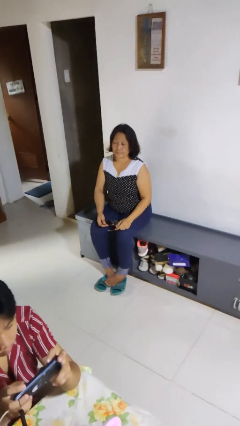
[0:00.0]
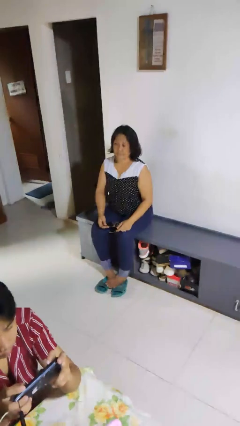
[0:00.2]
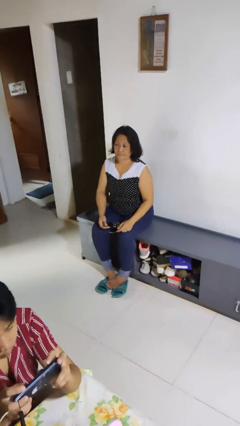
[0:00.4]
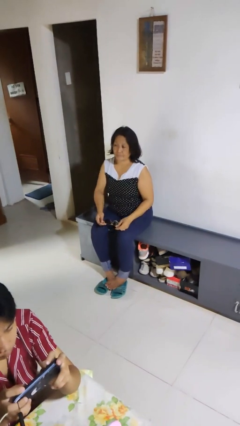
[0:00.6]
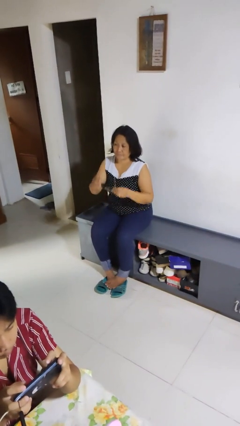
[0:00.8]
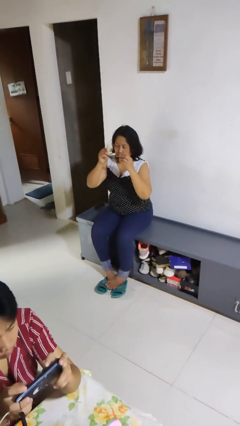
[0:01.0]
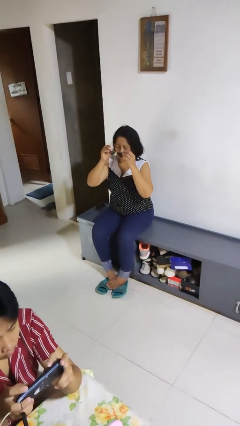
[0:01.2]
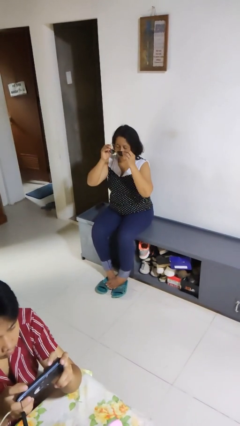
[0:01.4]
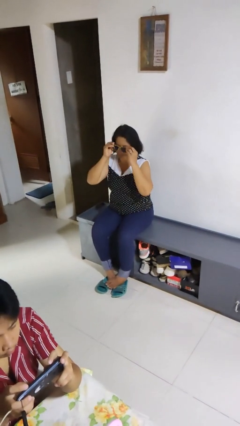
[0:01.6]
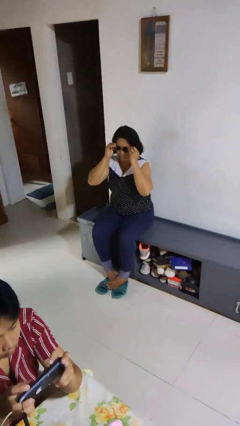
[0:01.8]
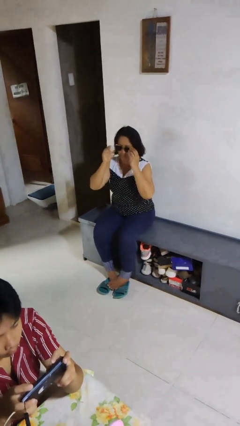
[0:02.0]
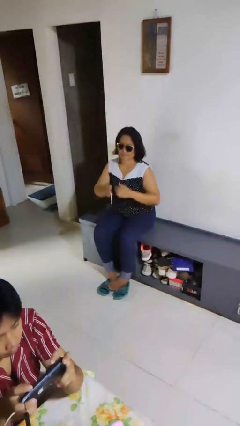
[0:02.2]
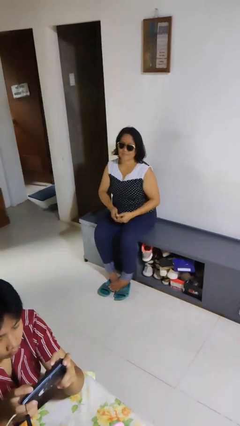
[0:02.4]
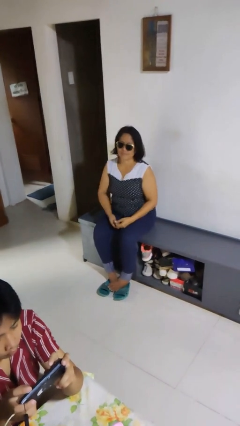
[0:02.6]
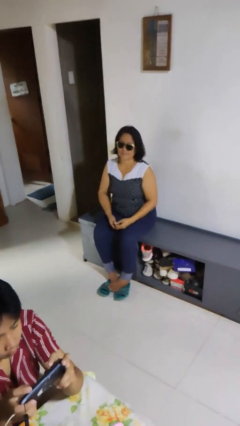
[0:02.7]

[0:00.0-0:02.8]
person puts on sunglasses

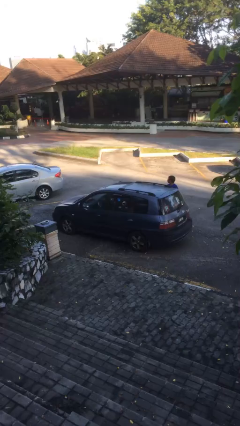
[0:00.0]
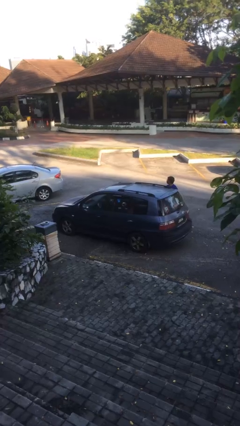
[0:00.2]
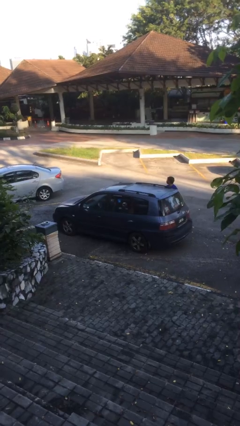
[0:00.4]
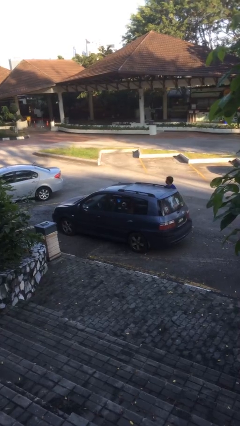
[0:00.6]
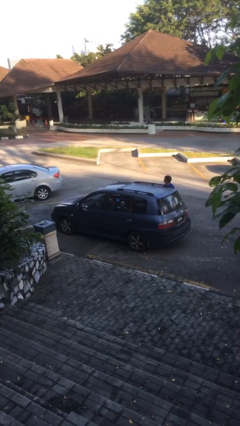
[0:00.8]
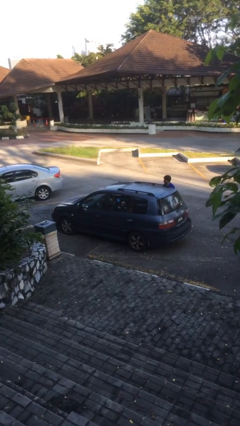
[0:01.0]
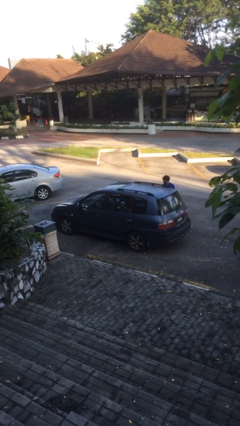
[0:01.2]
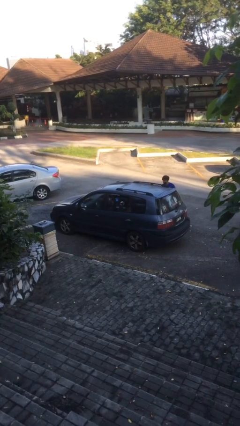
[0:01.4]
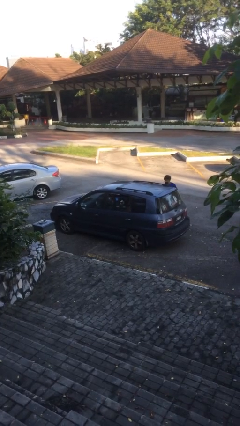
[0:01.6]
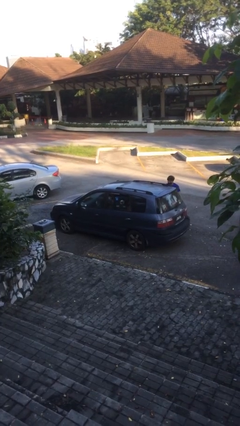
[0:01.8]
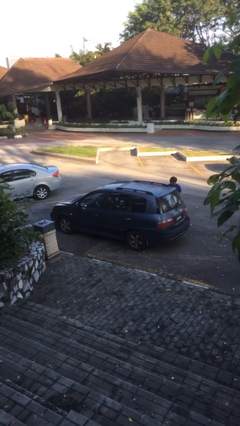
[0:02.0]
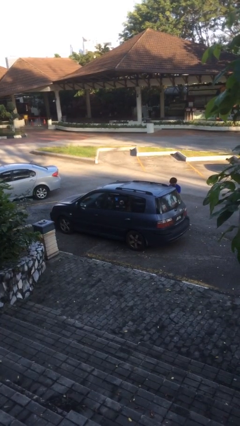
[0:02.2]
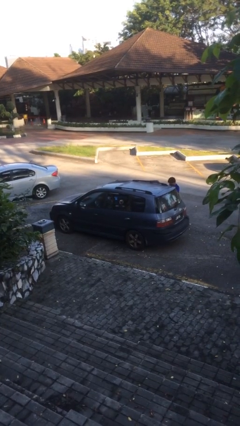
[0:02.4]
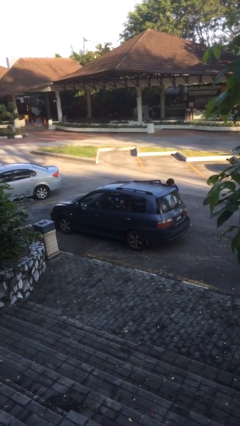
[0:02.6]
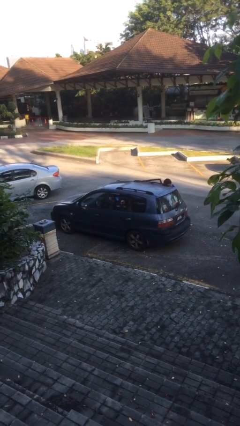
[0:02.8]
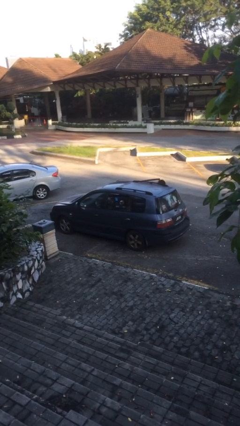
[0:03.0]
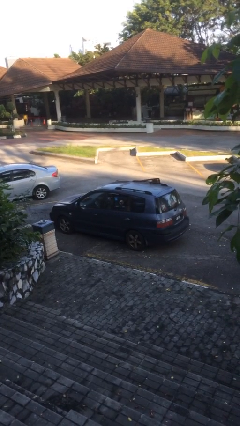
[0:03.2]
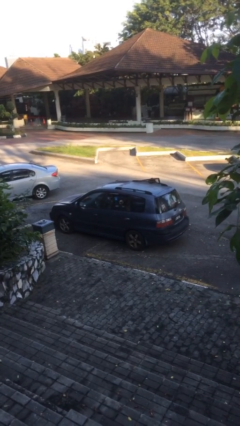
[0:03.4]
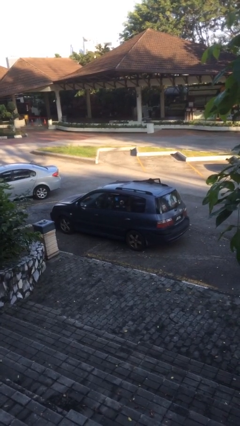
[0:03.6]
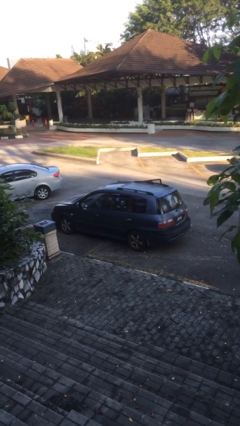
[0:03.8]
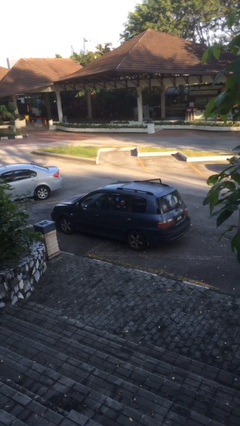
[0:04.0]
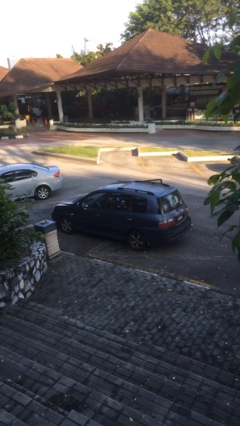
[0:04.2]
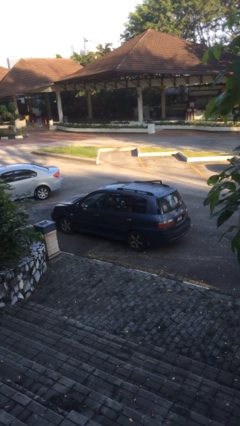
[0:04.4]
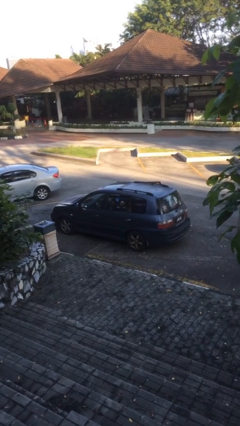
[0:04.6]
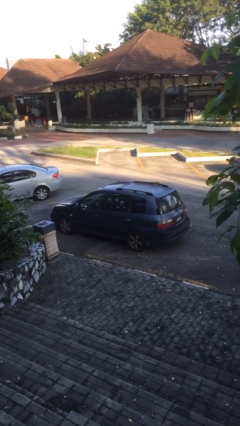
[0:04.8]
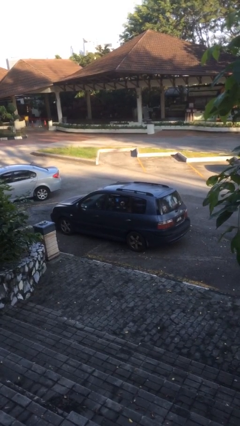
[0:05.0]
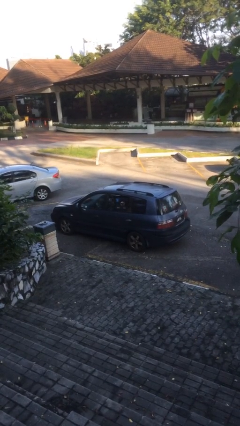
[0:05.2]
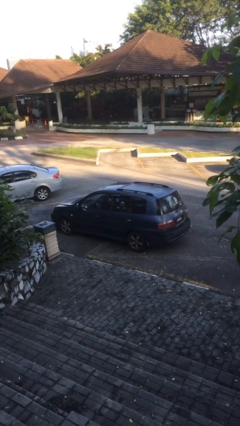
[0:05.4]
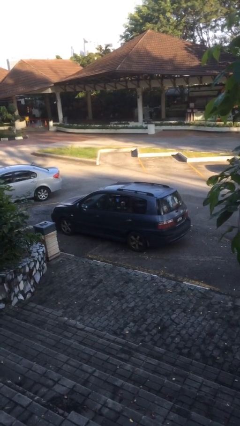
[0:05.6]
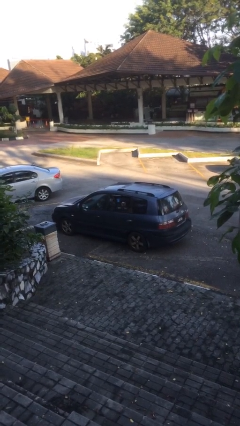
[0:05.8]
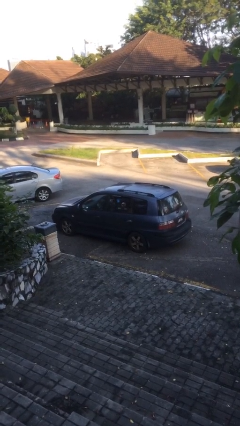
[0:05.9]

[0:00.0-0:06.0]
car picks up person

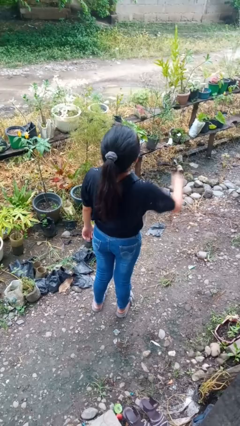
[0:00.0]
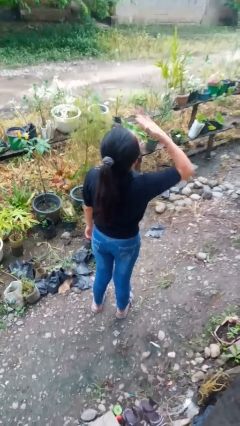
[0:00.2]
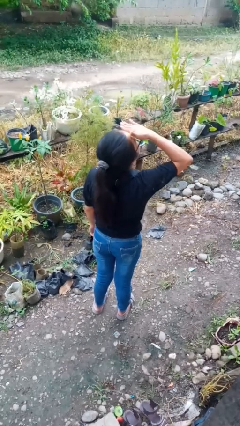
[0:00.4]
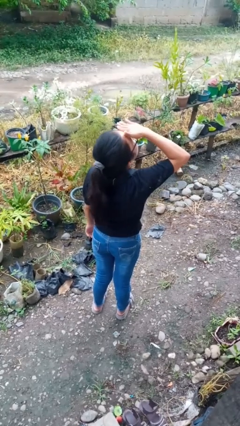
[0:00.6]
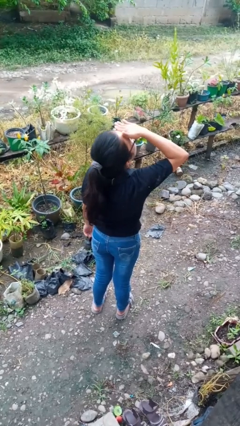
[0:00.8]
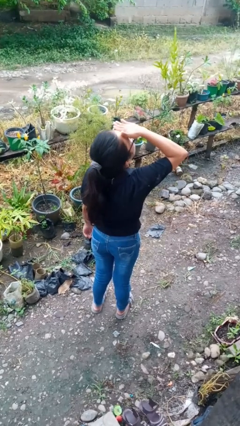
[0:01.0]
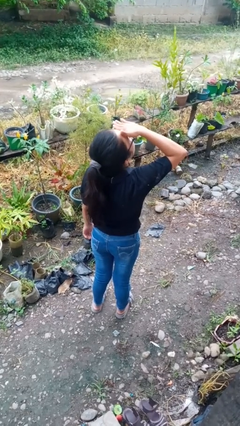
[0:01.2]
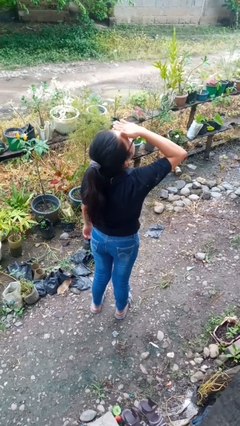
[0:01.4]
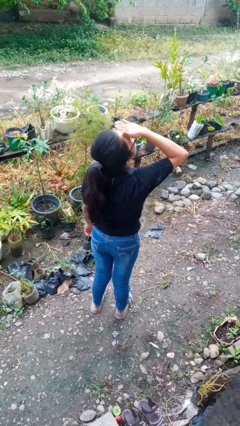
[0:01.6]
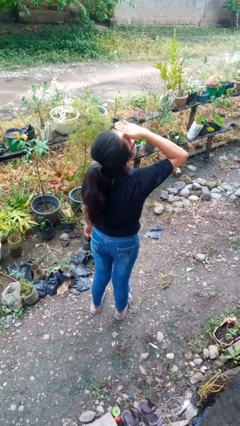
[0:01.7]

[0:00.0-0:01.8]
person shades eyes

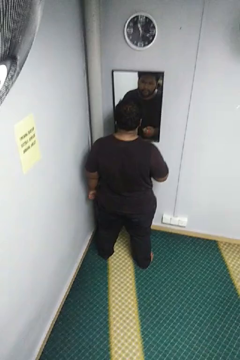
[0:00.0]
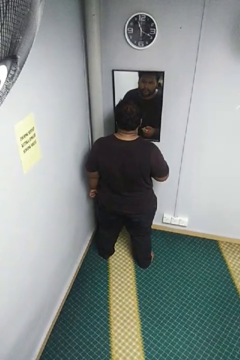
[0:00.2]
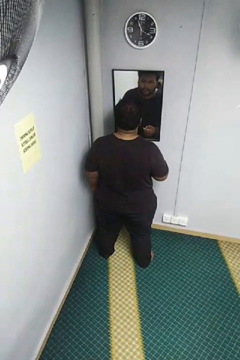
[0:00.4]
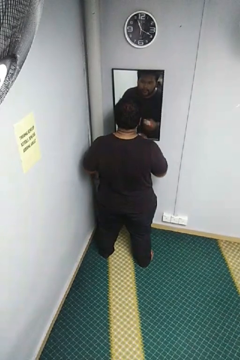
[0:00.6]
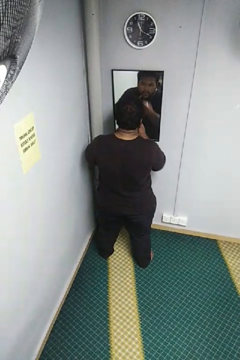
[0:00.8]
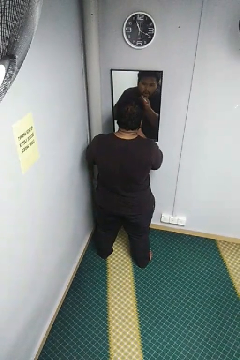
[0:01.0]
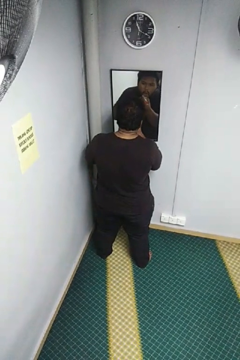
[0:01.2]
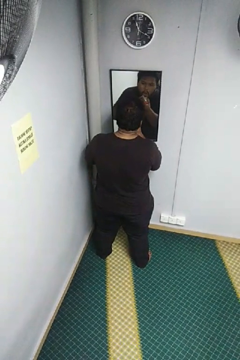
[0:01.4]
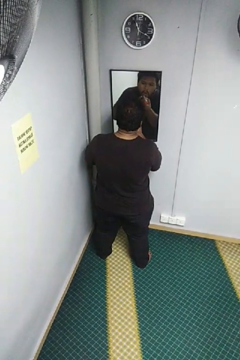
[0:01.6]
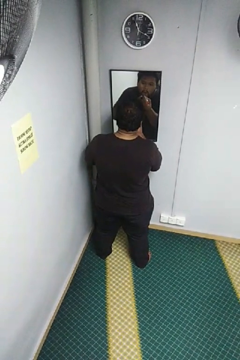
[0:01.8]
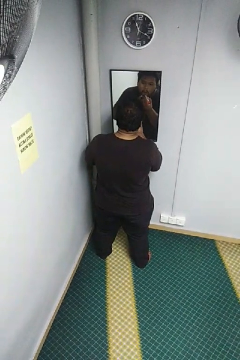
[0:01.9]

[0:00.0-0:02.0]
person applies lip makeup

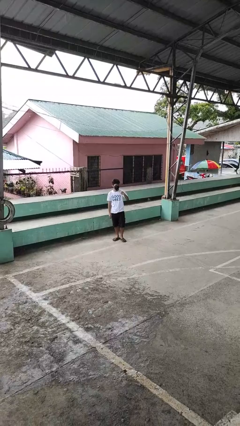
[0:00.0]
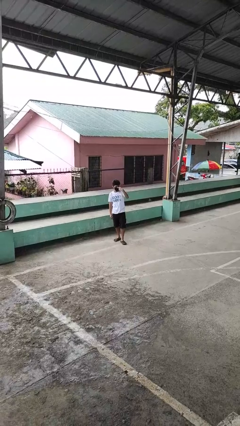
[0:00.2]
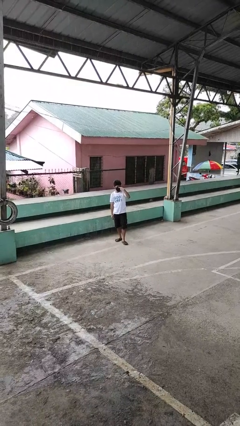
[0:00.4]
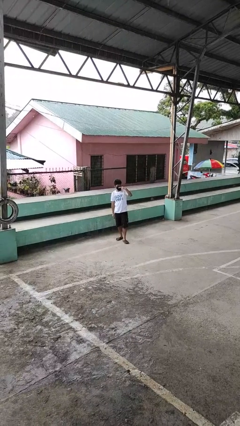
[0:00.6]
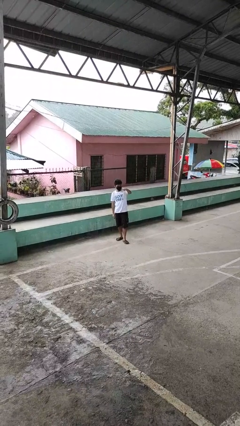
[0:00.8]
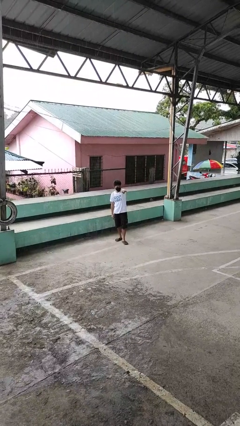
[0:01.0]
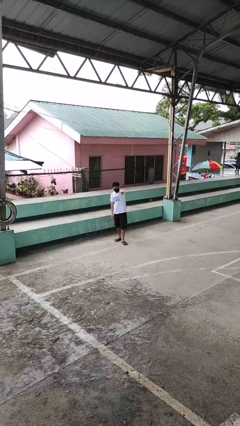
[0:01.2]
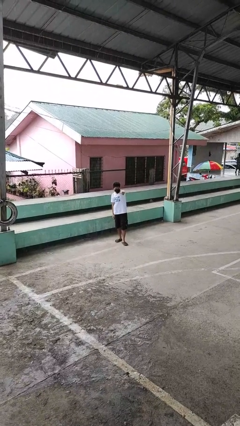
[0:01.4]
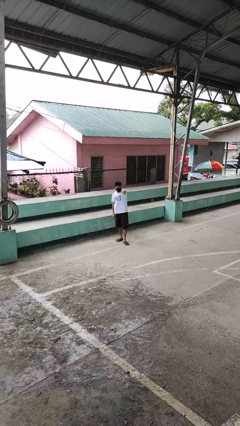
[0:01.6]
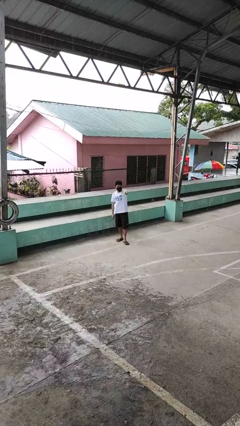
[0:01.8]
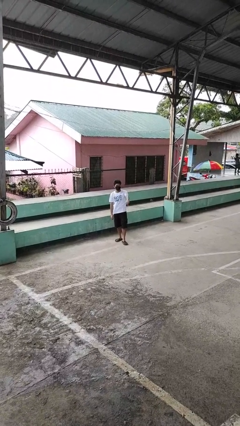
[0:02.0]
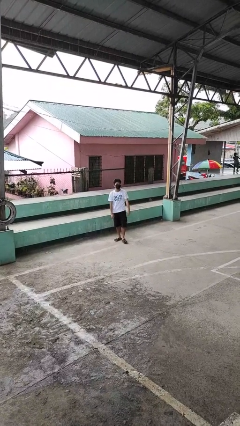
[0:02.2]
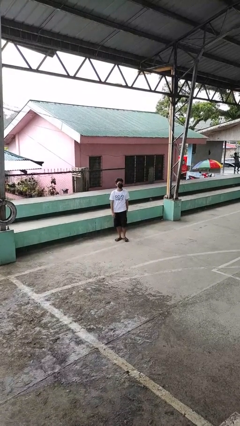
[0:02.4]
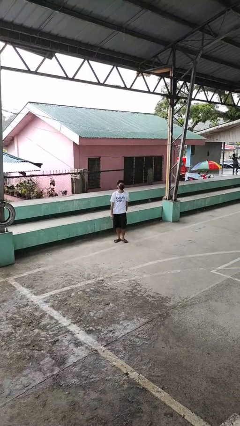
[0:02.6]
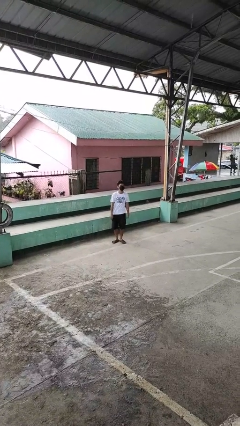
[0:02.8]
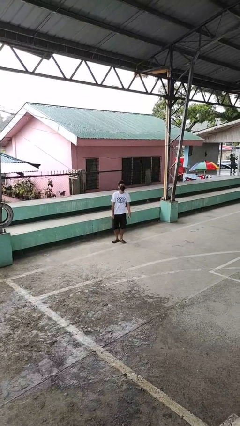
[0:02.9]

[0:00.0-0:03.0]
person gestures watch closely

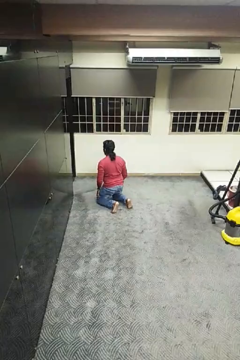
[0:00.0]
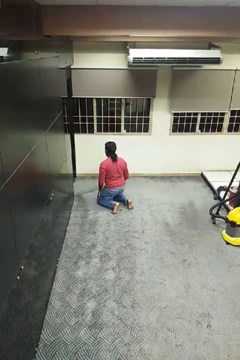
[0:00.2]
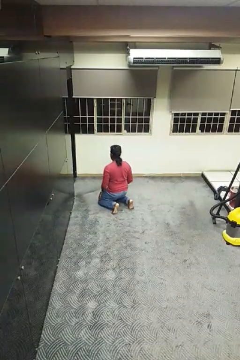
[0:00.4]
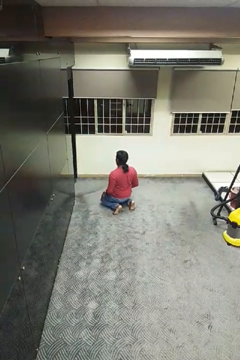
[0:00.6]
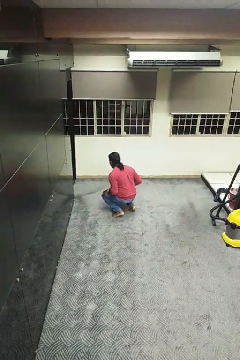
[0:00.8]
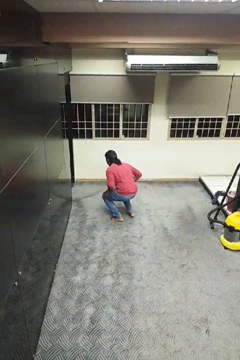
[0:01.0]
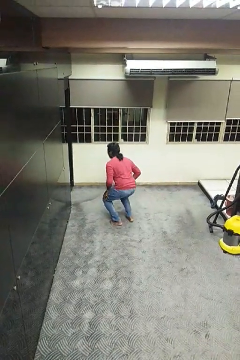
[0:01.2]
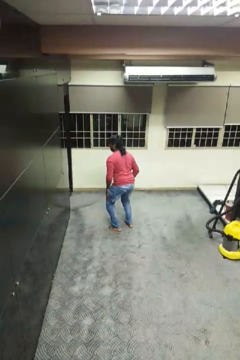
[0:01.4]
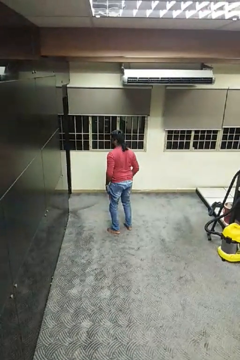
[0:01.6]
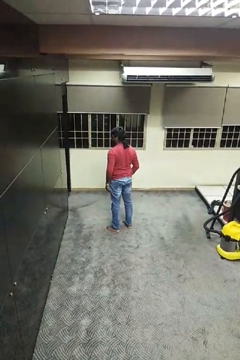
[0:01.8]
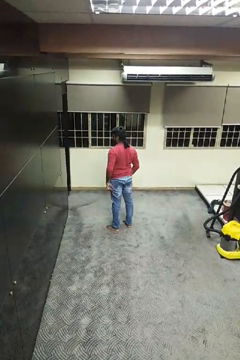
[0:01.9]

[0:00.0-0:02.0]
person stands up from floor

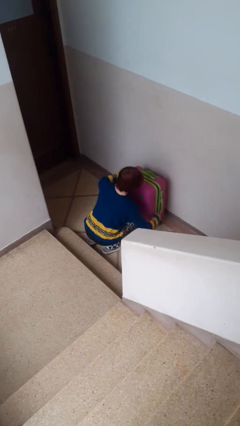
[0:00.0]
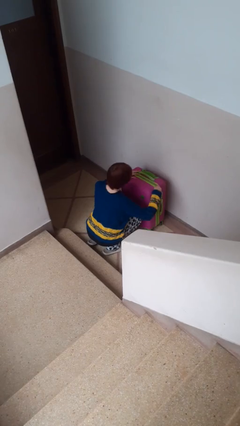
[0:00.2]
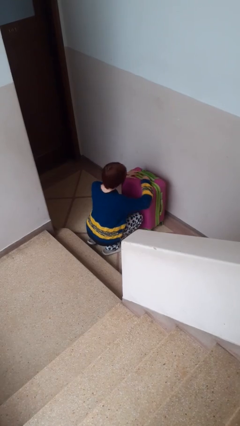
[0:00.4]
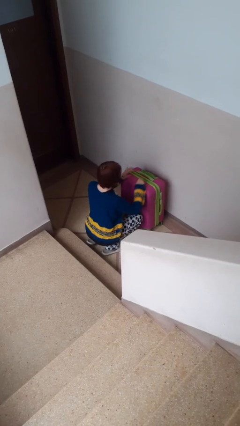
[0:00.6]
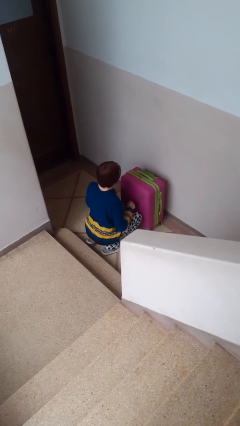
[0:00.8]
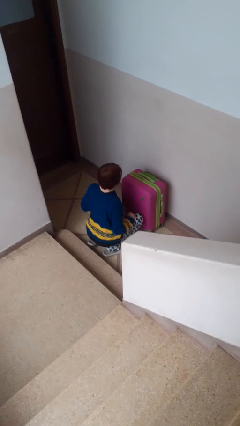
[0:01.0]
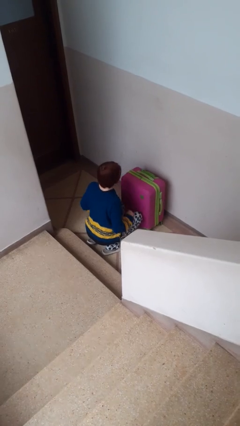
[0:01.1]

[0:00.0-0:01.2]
person closes suitcase
